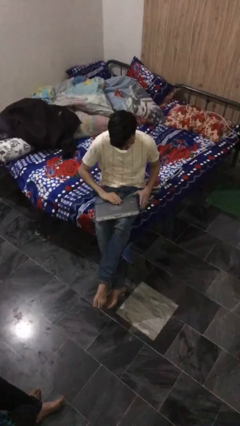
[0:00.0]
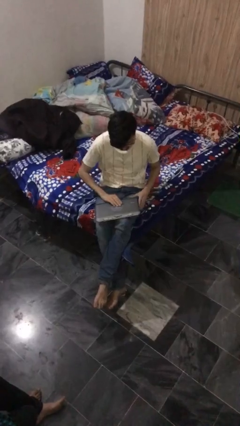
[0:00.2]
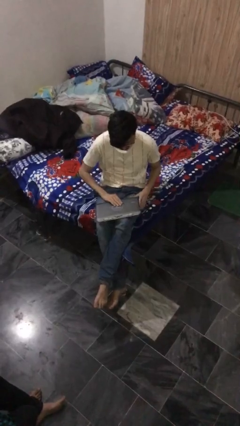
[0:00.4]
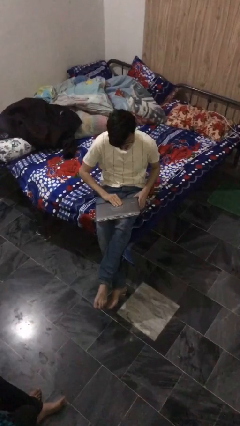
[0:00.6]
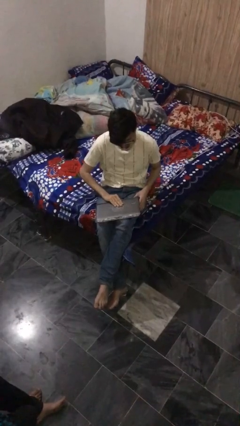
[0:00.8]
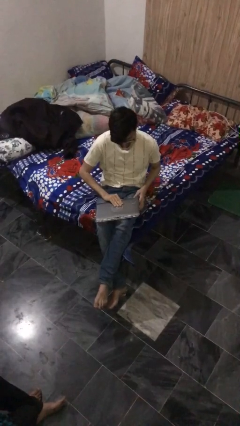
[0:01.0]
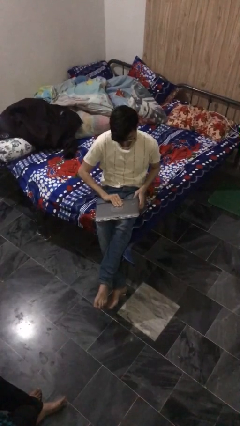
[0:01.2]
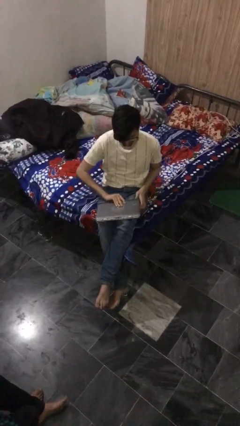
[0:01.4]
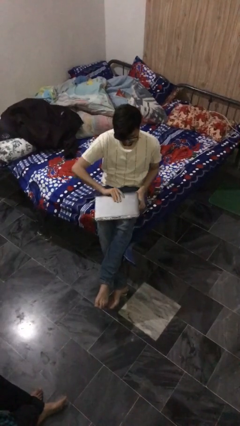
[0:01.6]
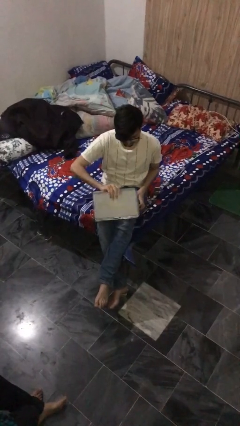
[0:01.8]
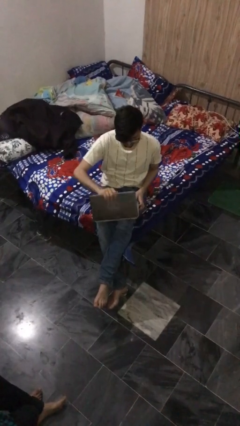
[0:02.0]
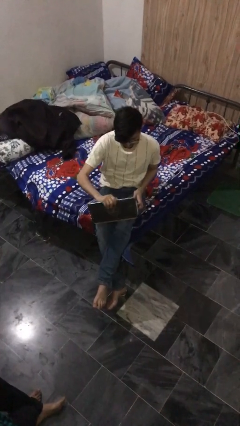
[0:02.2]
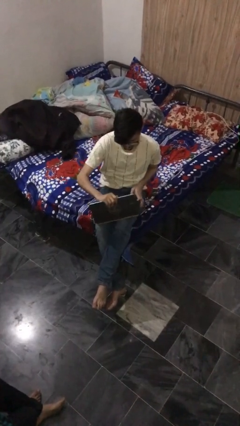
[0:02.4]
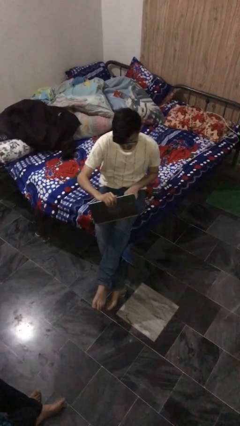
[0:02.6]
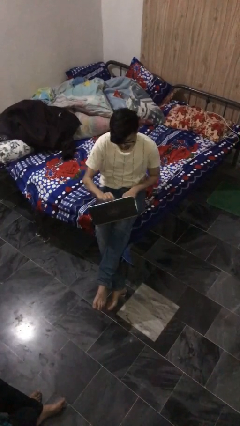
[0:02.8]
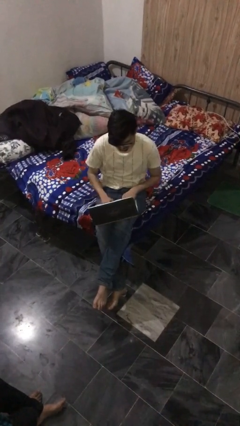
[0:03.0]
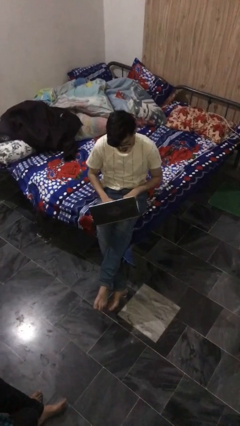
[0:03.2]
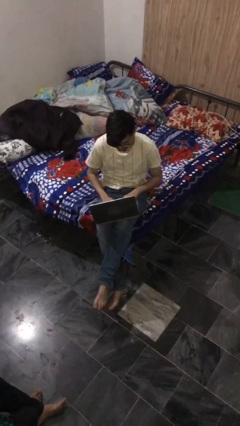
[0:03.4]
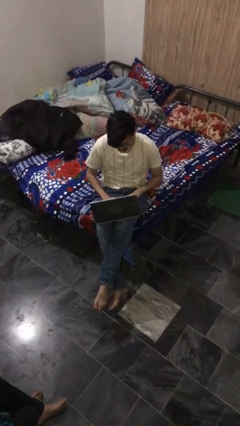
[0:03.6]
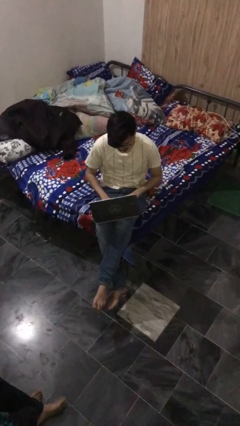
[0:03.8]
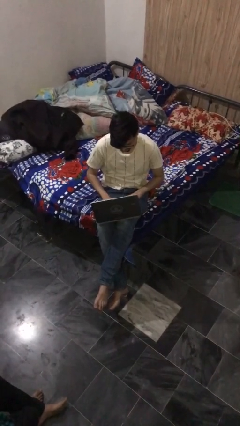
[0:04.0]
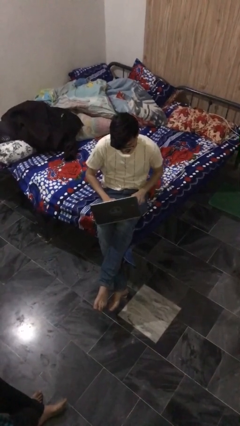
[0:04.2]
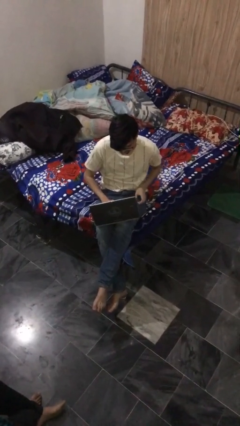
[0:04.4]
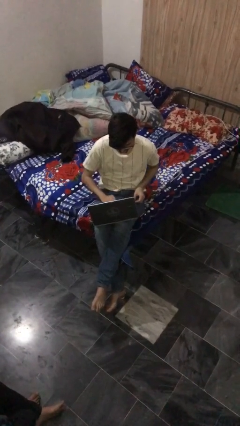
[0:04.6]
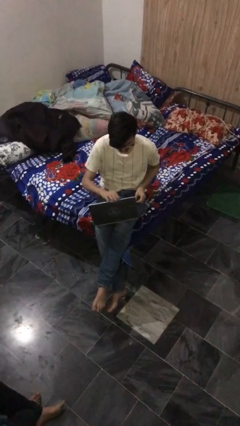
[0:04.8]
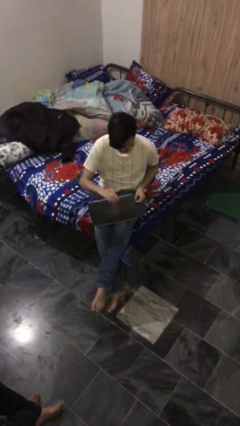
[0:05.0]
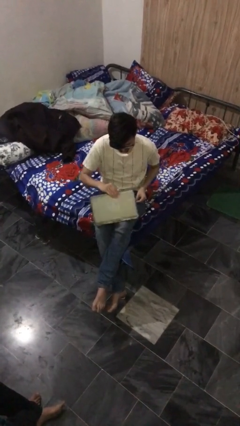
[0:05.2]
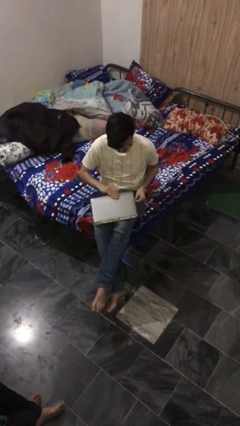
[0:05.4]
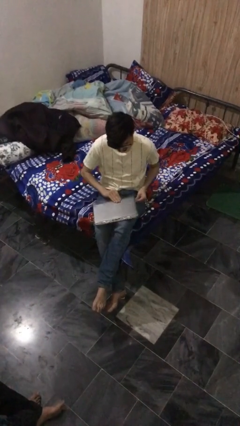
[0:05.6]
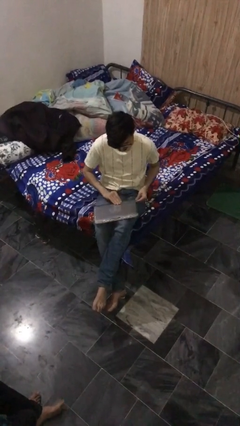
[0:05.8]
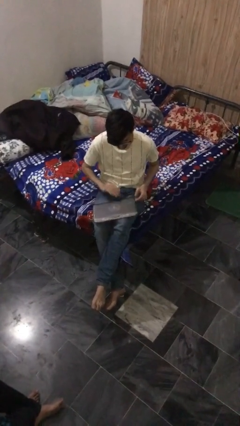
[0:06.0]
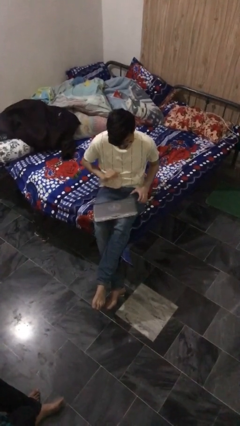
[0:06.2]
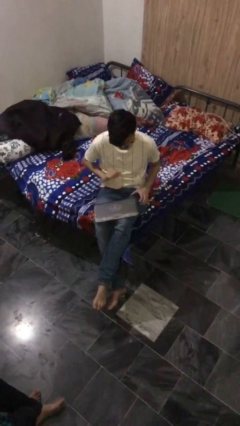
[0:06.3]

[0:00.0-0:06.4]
person interacts with laptop

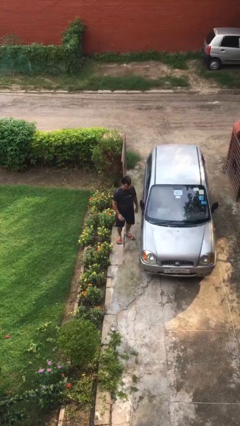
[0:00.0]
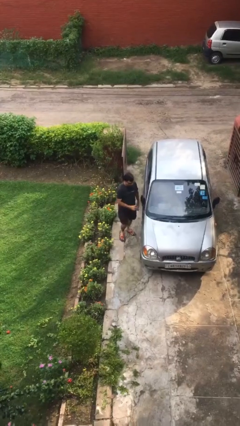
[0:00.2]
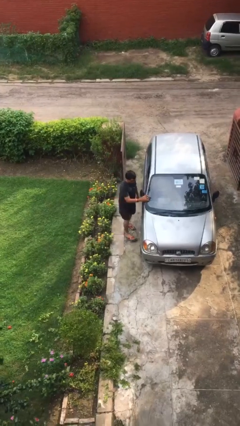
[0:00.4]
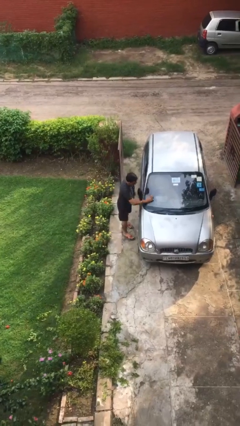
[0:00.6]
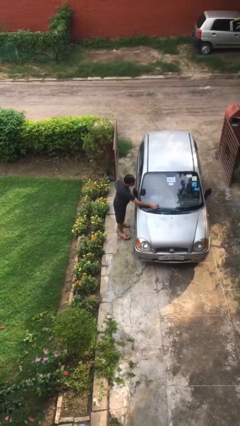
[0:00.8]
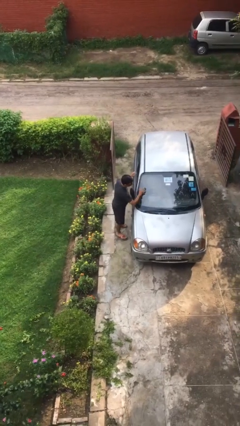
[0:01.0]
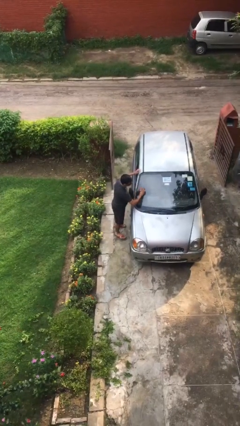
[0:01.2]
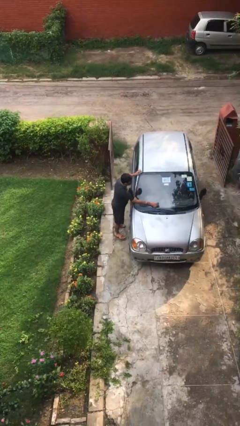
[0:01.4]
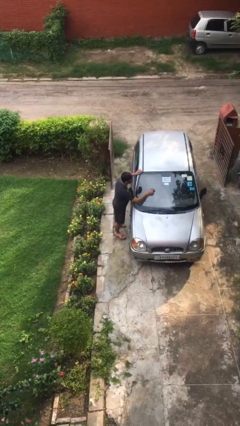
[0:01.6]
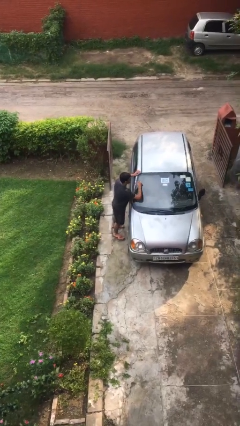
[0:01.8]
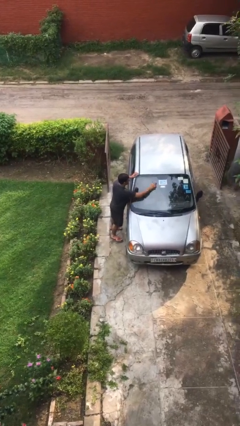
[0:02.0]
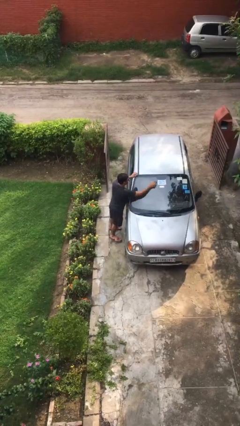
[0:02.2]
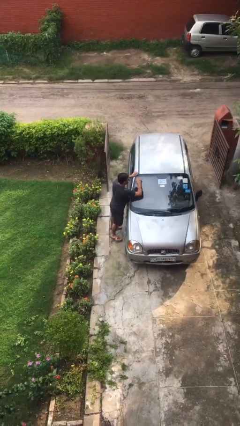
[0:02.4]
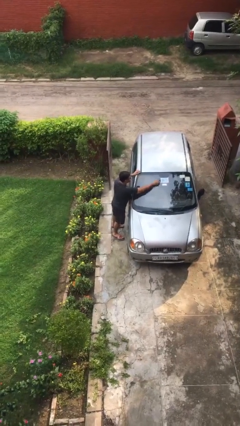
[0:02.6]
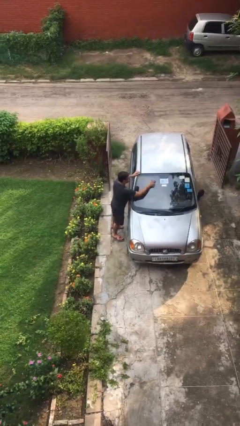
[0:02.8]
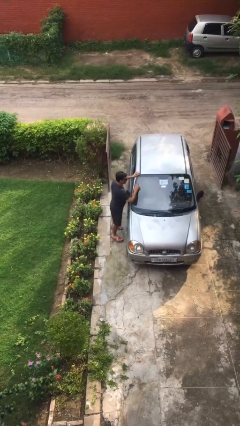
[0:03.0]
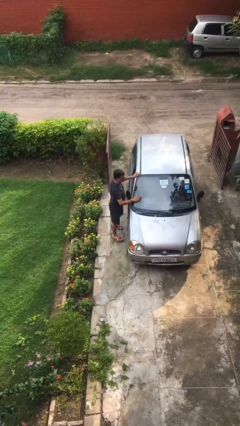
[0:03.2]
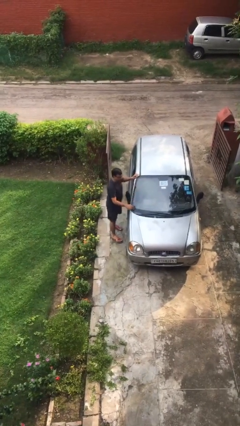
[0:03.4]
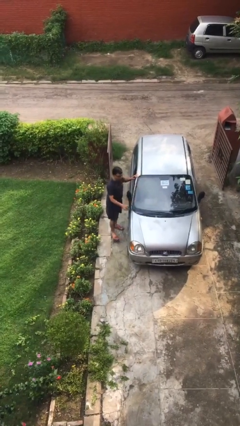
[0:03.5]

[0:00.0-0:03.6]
person polishes car with rag

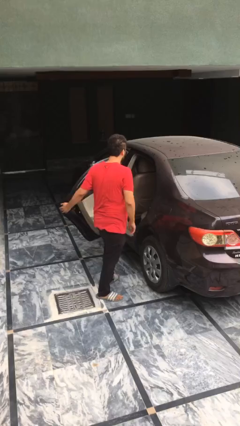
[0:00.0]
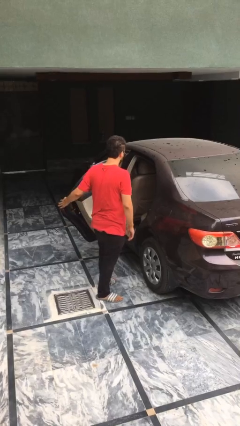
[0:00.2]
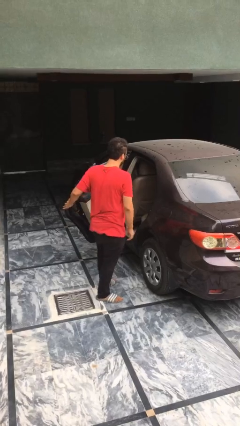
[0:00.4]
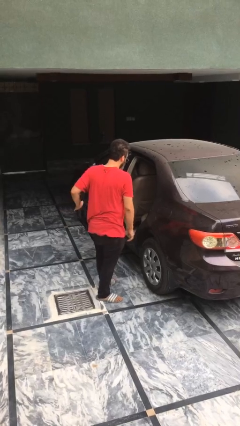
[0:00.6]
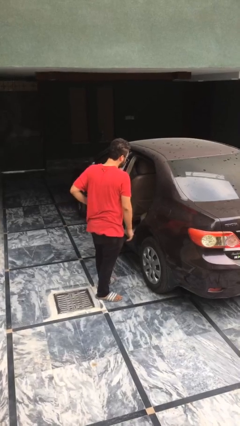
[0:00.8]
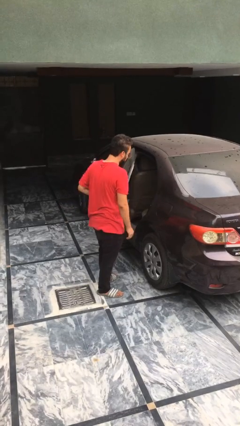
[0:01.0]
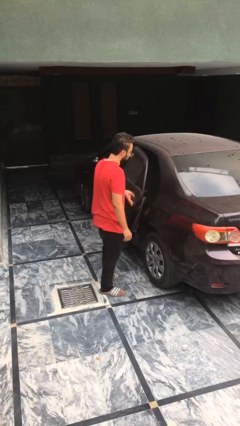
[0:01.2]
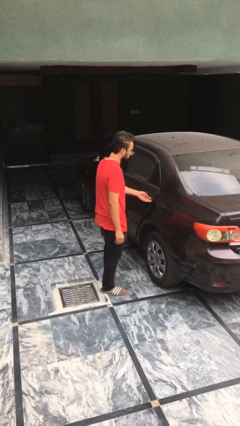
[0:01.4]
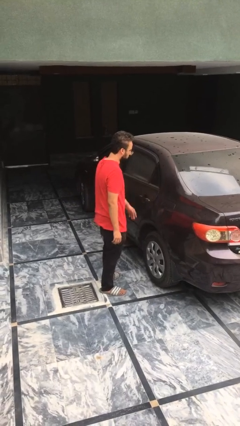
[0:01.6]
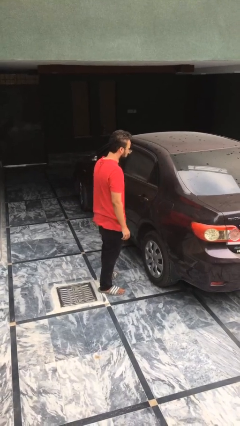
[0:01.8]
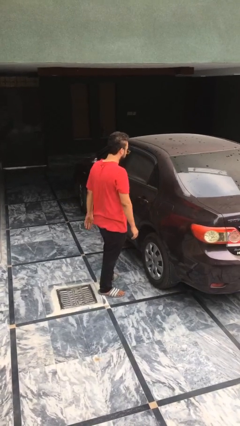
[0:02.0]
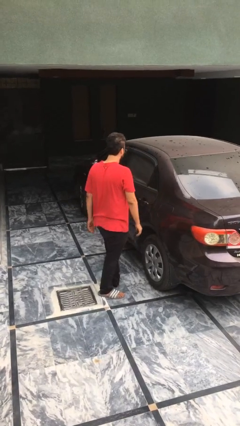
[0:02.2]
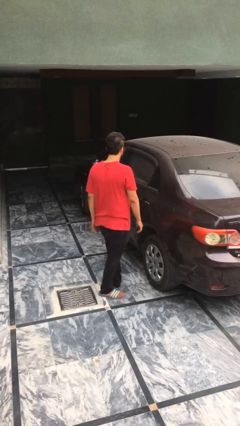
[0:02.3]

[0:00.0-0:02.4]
person closes car door

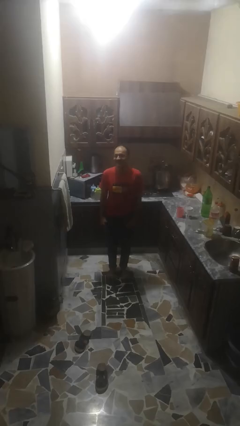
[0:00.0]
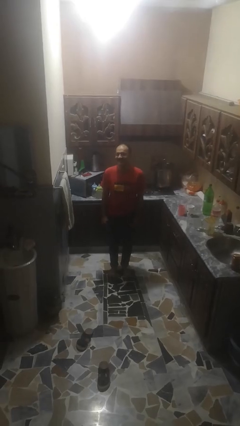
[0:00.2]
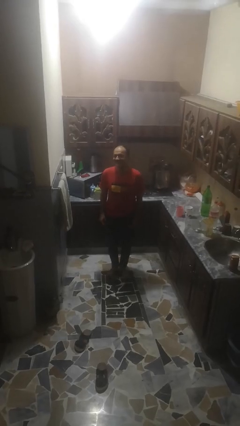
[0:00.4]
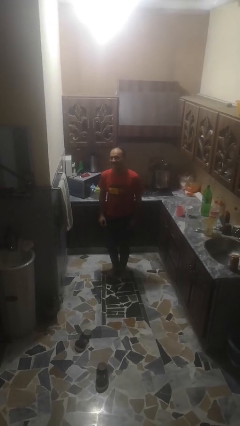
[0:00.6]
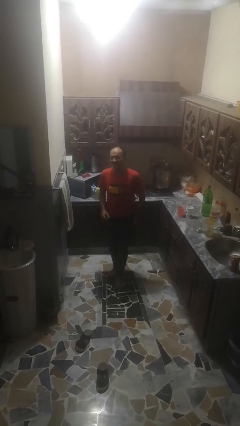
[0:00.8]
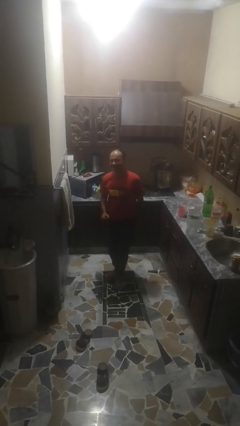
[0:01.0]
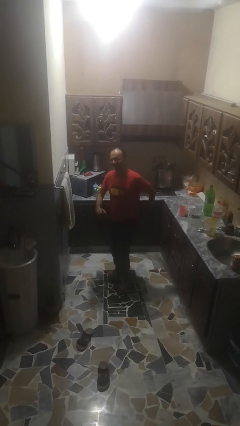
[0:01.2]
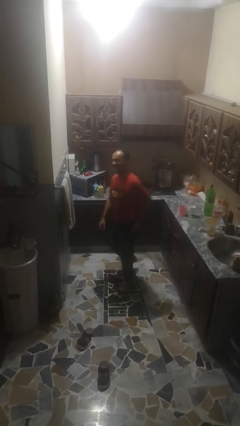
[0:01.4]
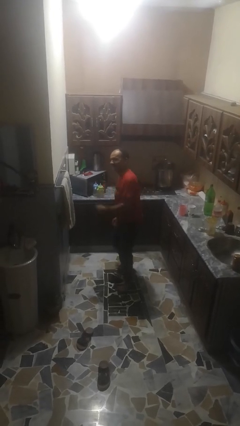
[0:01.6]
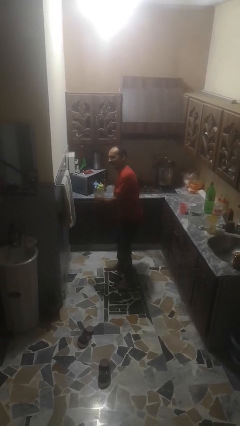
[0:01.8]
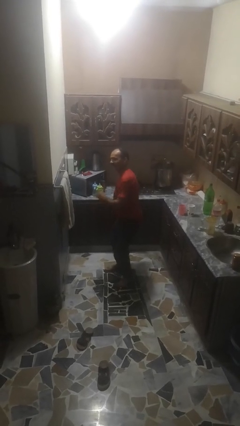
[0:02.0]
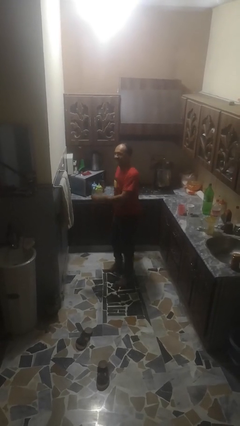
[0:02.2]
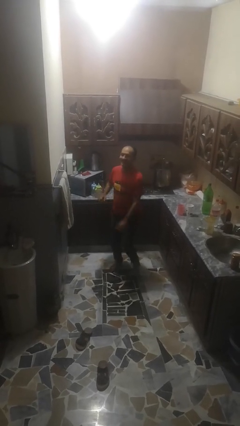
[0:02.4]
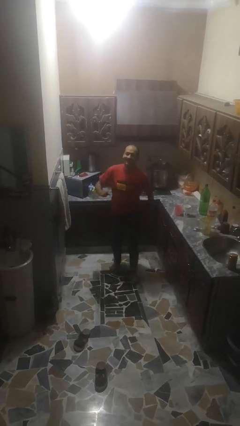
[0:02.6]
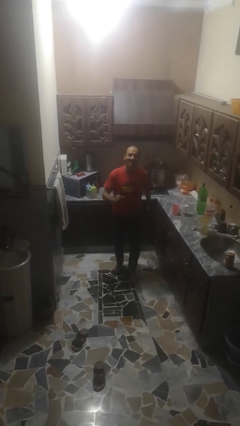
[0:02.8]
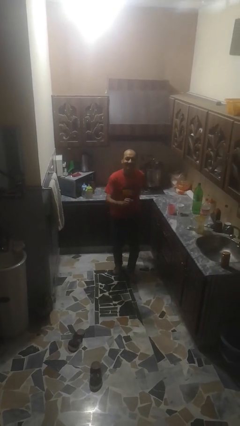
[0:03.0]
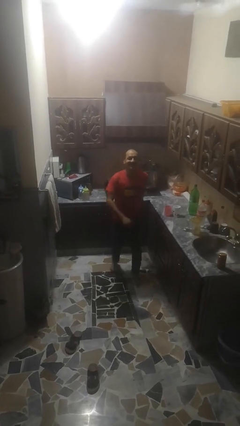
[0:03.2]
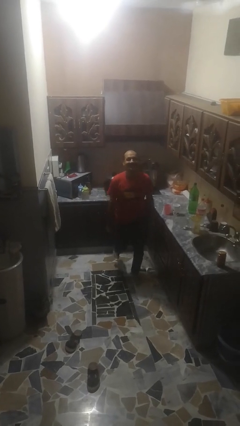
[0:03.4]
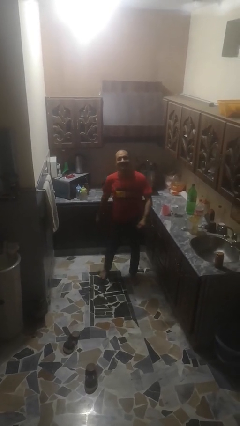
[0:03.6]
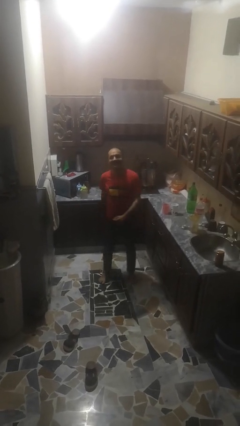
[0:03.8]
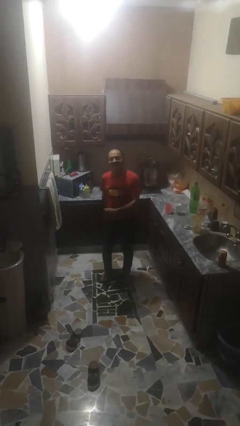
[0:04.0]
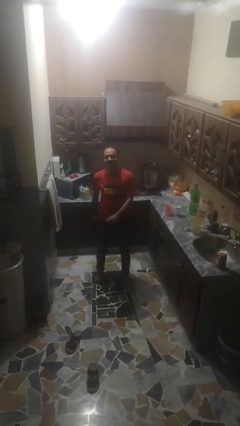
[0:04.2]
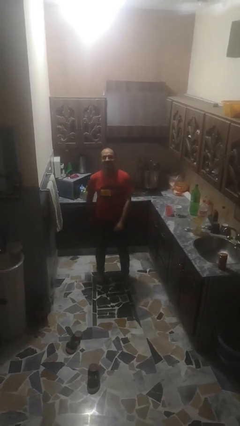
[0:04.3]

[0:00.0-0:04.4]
person dances in place

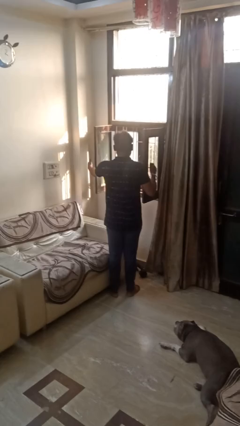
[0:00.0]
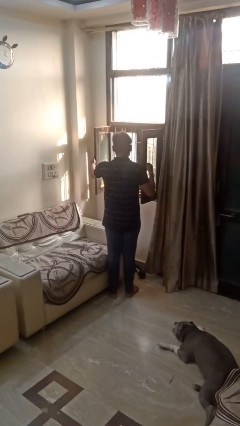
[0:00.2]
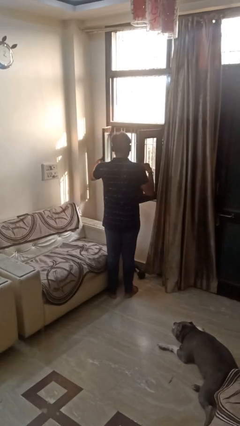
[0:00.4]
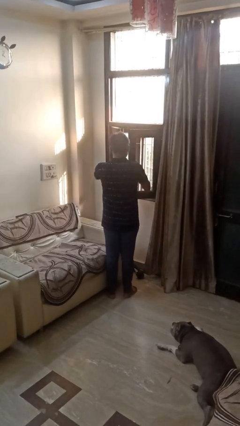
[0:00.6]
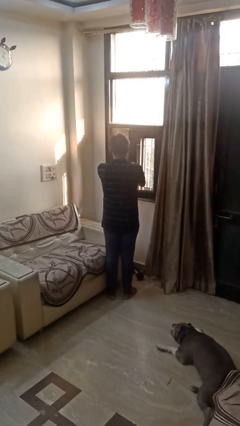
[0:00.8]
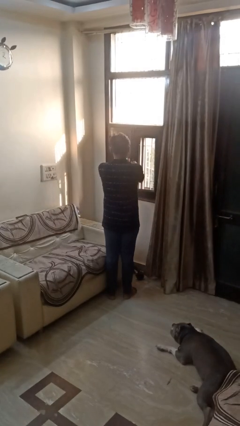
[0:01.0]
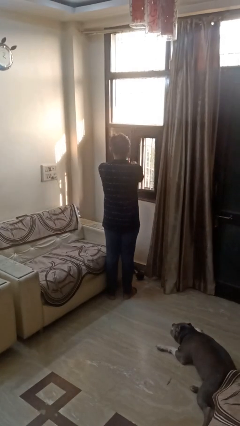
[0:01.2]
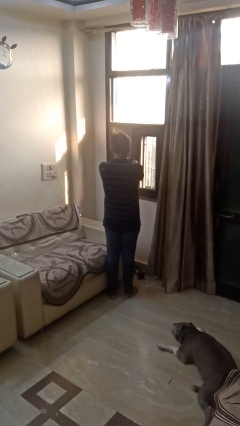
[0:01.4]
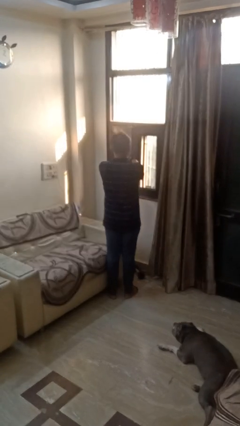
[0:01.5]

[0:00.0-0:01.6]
person closes home window
